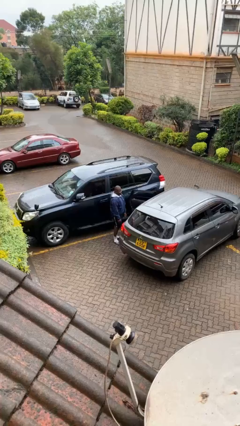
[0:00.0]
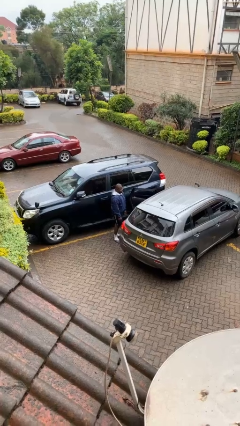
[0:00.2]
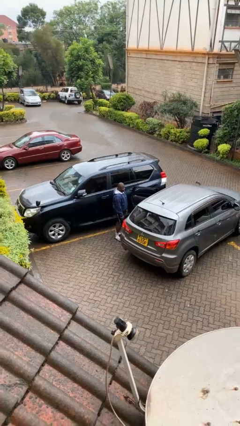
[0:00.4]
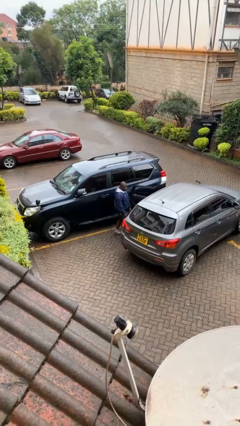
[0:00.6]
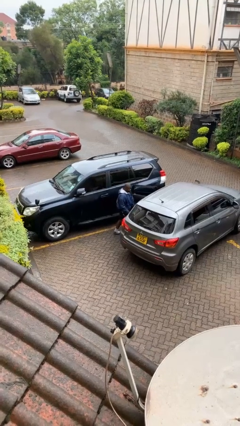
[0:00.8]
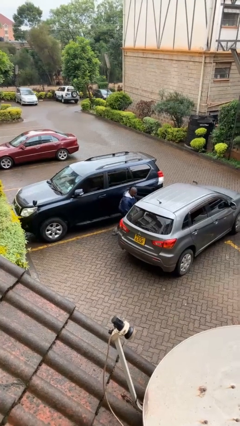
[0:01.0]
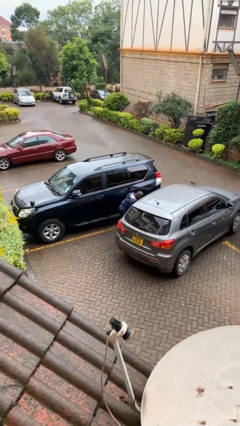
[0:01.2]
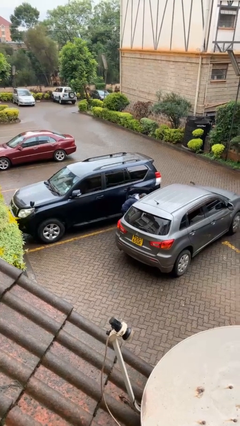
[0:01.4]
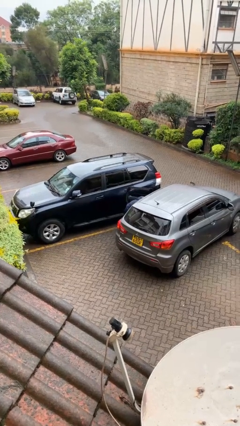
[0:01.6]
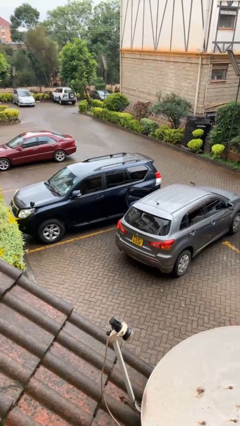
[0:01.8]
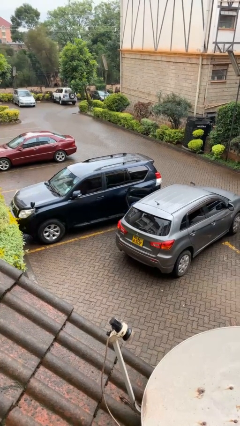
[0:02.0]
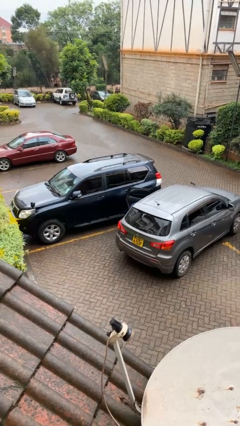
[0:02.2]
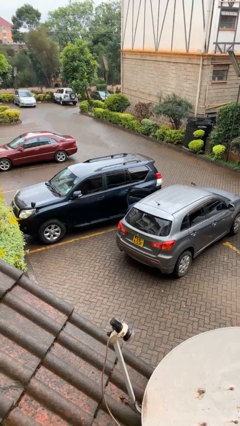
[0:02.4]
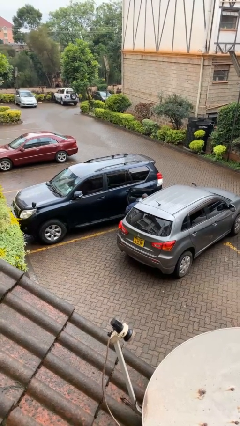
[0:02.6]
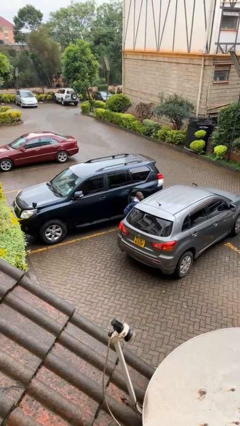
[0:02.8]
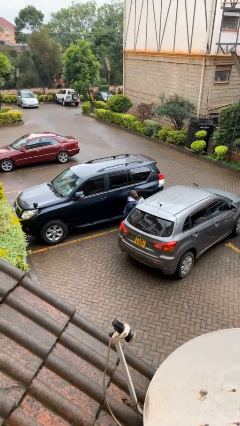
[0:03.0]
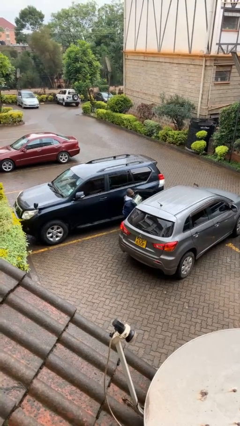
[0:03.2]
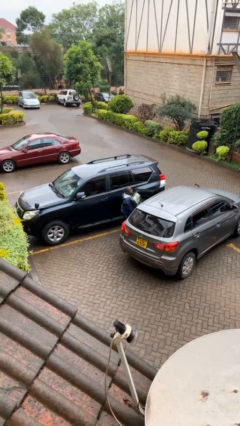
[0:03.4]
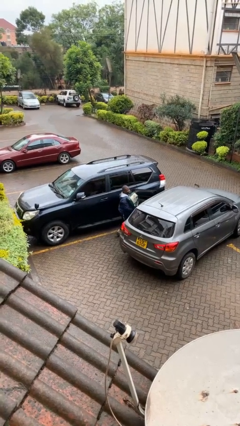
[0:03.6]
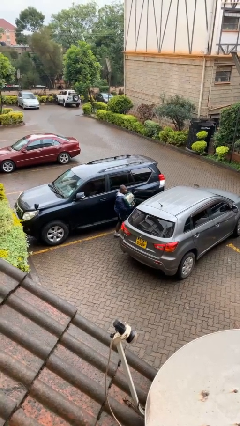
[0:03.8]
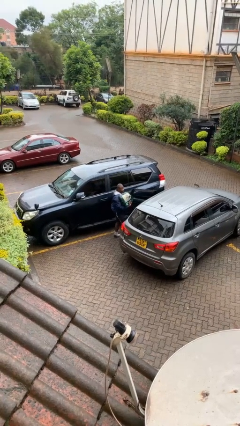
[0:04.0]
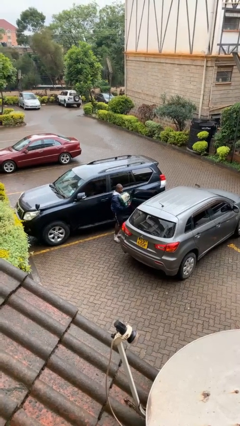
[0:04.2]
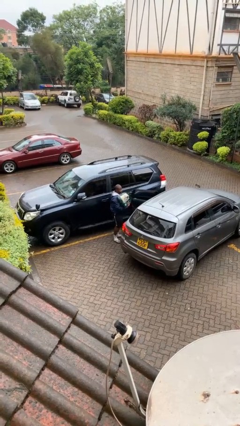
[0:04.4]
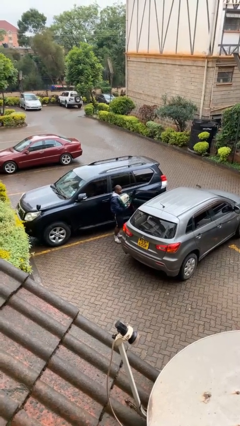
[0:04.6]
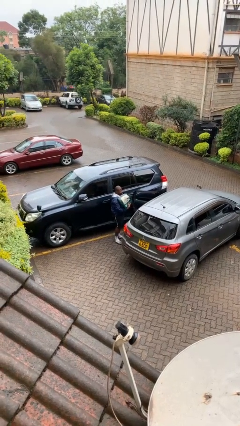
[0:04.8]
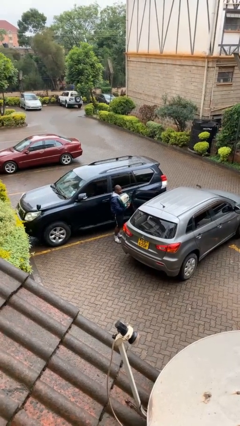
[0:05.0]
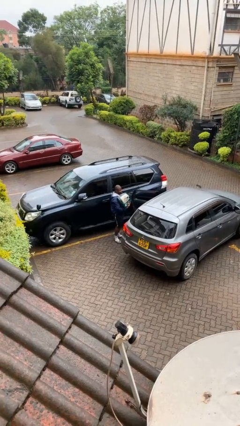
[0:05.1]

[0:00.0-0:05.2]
person unloads car

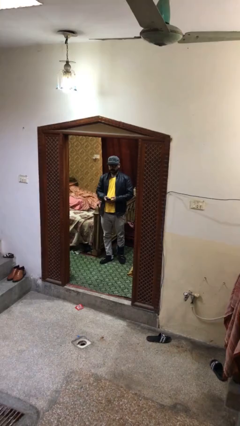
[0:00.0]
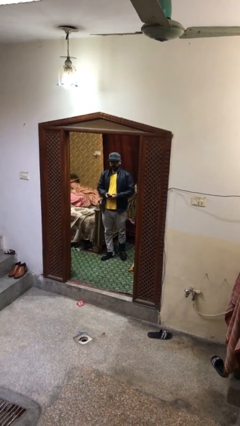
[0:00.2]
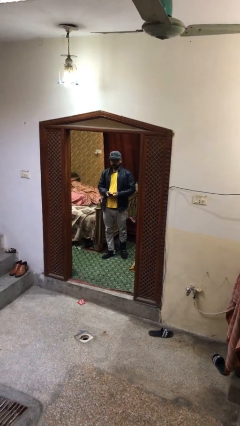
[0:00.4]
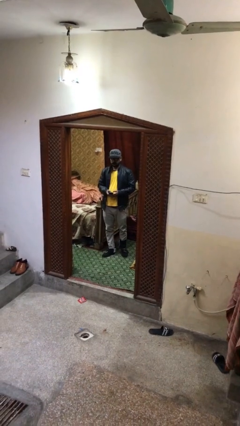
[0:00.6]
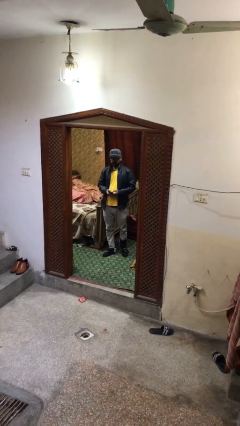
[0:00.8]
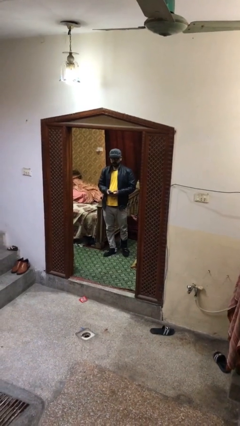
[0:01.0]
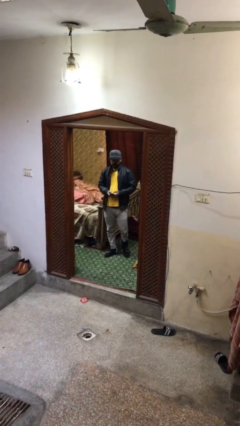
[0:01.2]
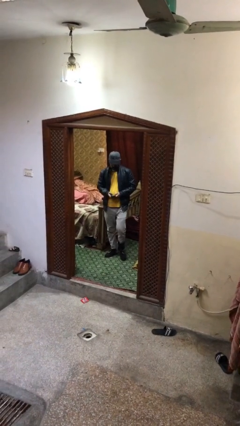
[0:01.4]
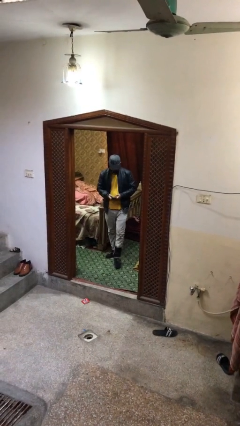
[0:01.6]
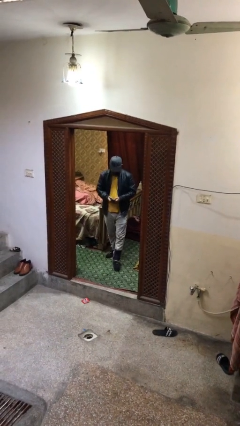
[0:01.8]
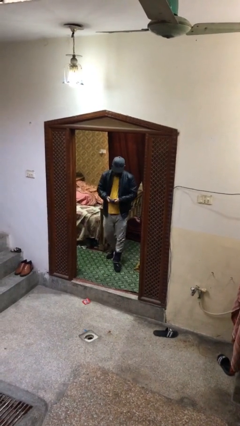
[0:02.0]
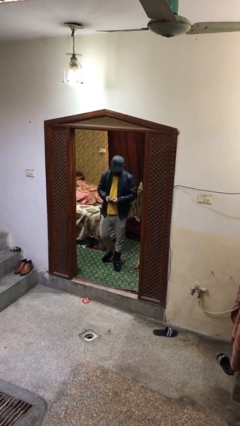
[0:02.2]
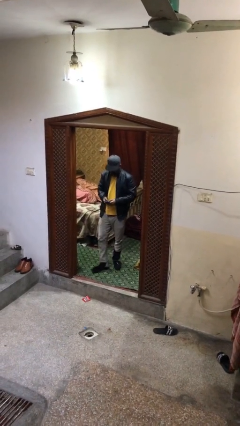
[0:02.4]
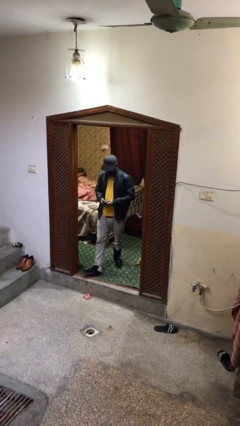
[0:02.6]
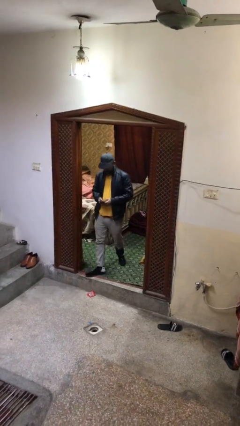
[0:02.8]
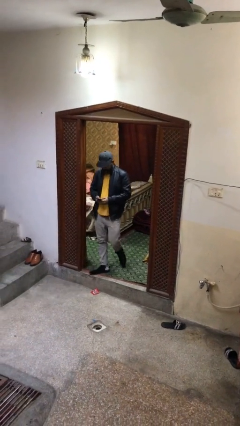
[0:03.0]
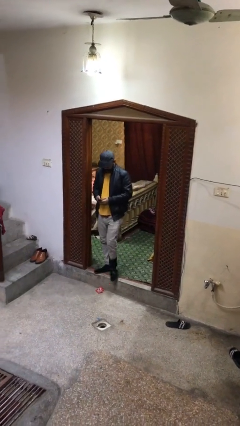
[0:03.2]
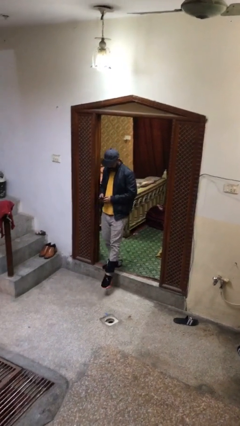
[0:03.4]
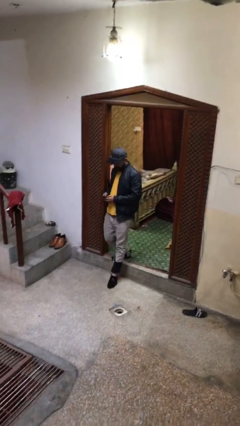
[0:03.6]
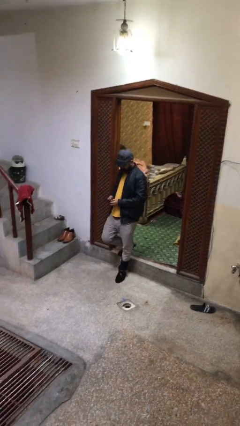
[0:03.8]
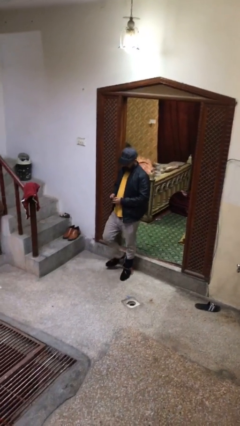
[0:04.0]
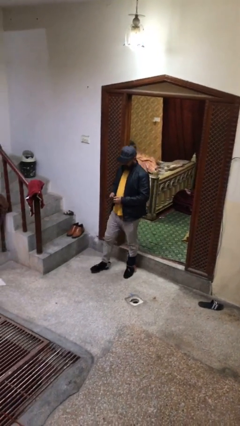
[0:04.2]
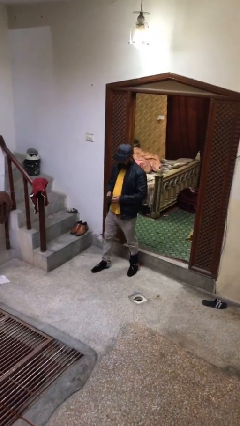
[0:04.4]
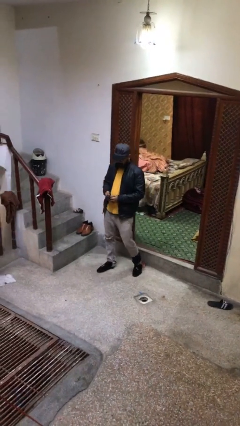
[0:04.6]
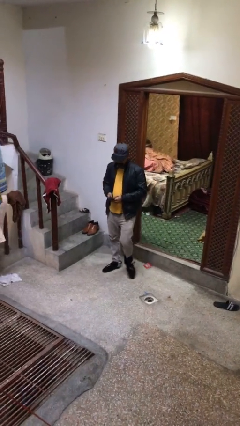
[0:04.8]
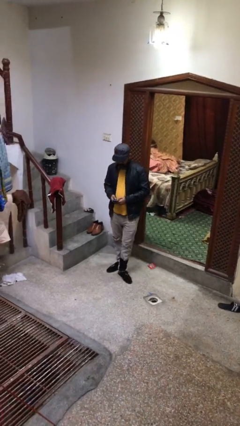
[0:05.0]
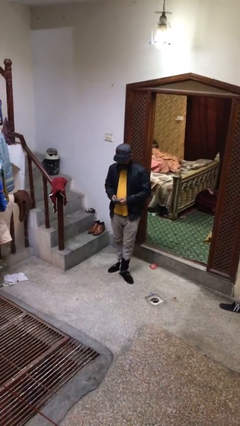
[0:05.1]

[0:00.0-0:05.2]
person enters scene through structure

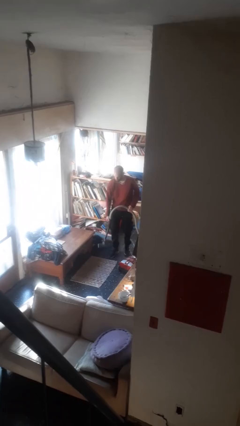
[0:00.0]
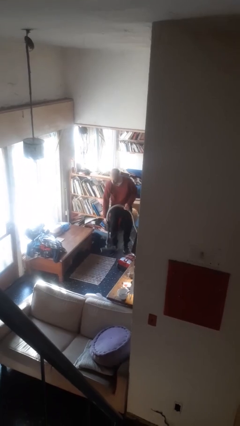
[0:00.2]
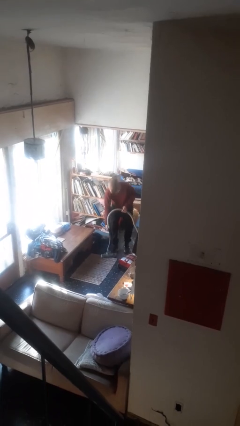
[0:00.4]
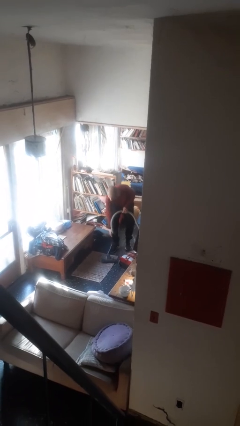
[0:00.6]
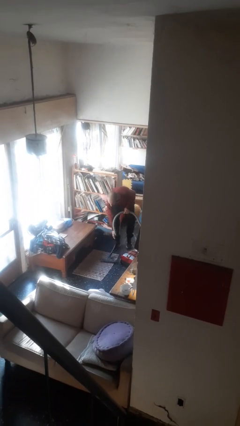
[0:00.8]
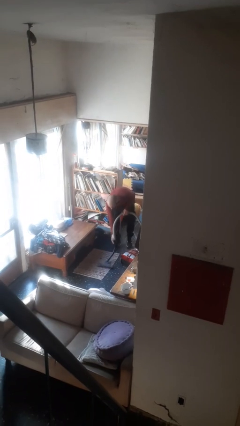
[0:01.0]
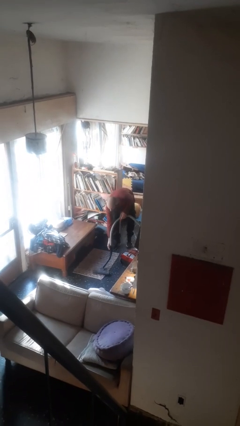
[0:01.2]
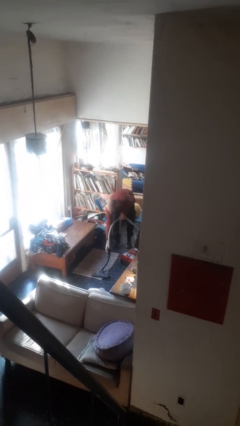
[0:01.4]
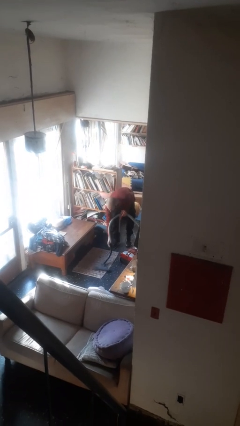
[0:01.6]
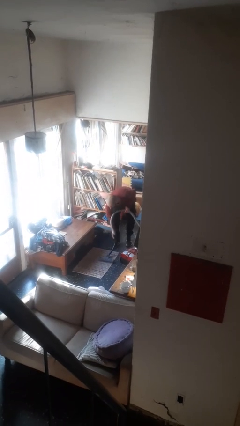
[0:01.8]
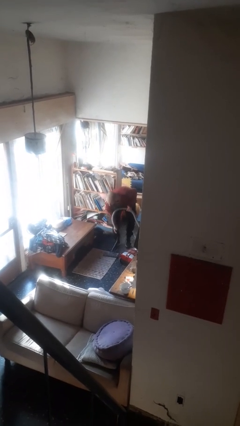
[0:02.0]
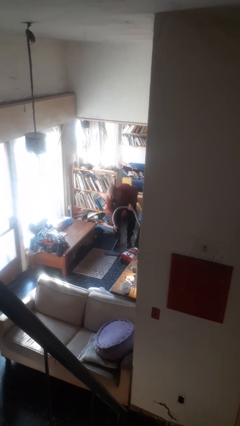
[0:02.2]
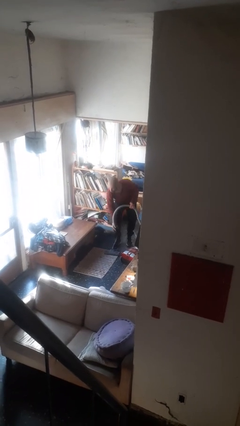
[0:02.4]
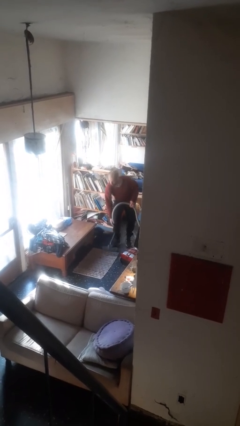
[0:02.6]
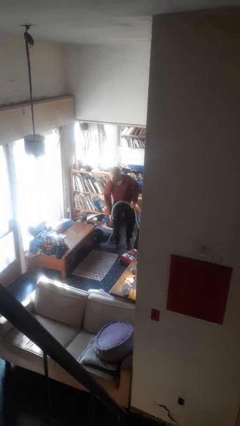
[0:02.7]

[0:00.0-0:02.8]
person vacuums carpet

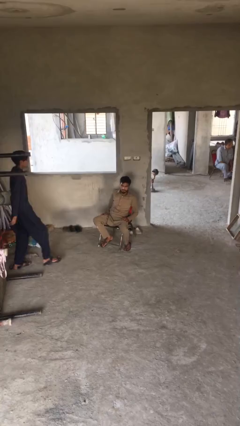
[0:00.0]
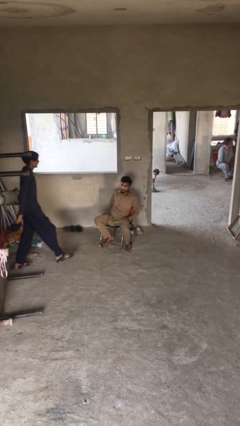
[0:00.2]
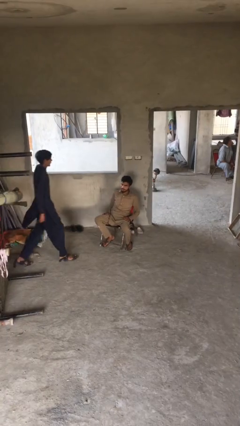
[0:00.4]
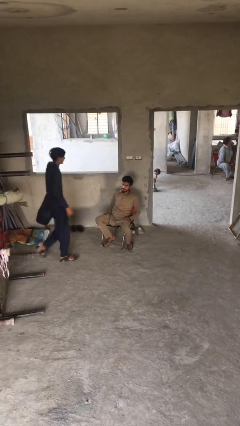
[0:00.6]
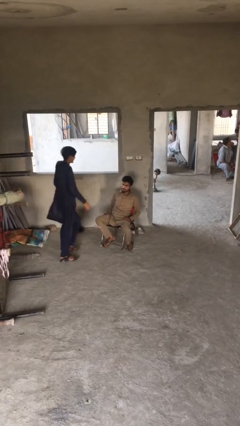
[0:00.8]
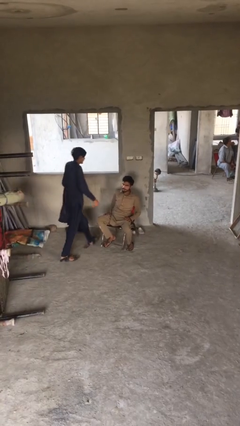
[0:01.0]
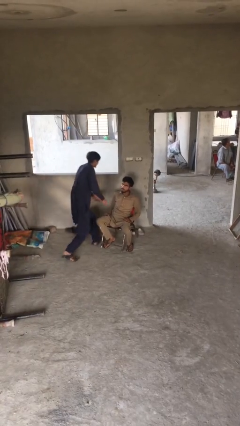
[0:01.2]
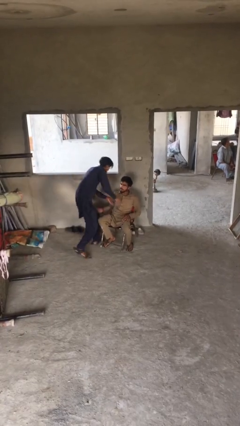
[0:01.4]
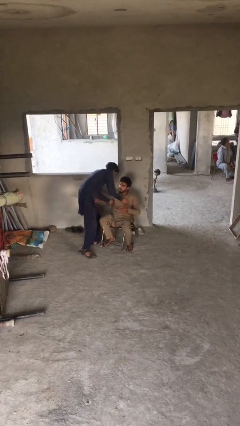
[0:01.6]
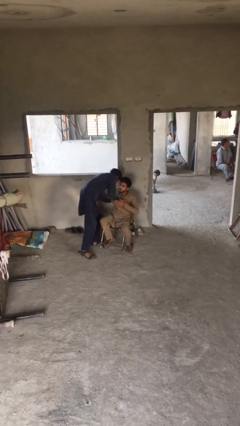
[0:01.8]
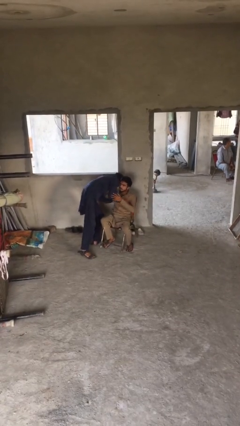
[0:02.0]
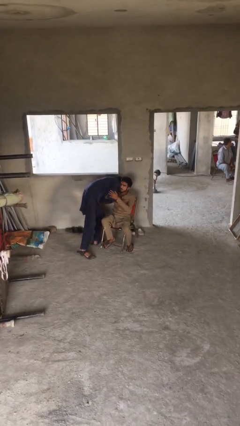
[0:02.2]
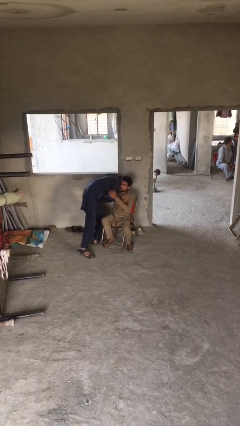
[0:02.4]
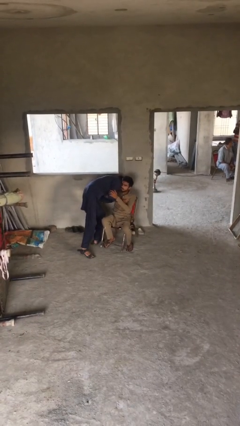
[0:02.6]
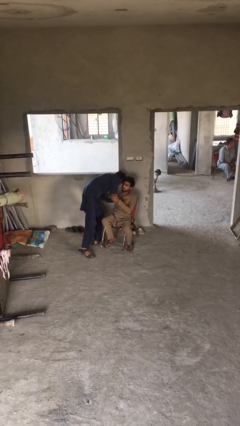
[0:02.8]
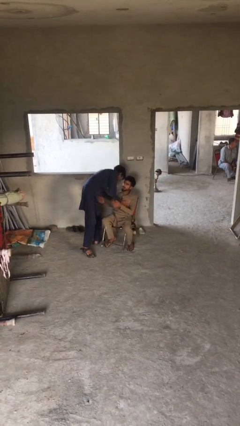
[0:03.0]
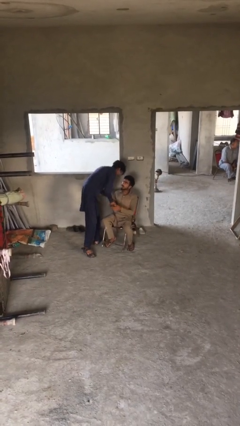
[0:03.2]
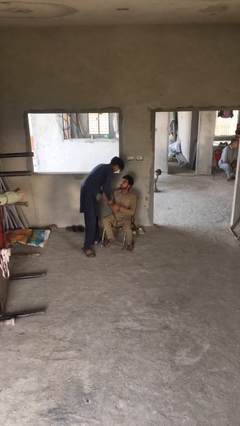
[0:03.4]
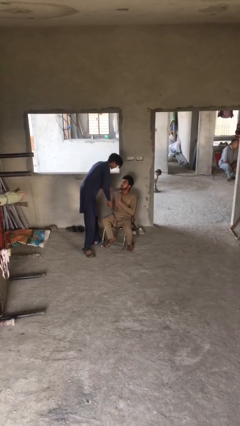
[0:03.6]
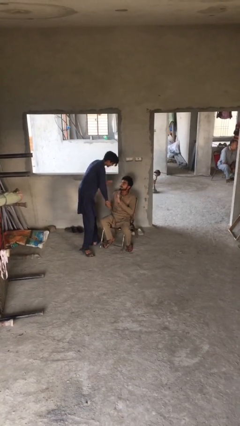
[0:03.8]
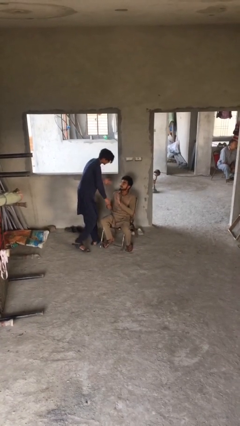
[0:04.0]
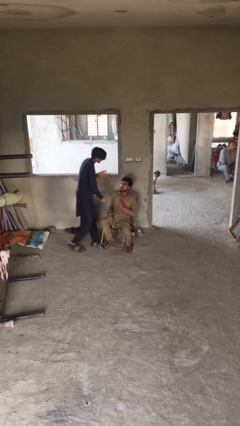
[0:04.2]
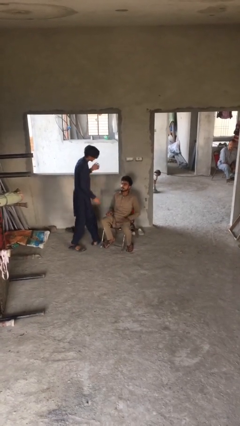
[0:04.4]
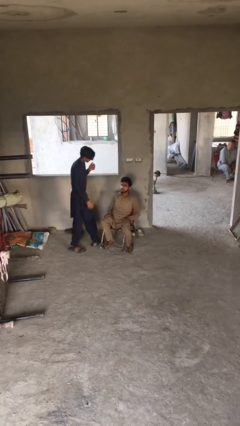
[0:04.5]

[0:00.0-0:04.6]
person embraces person
